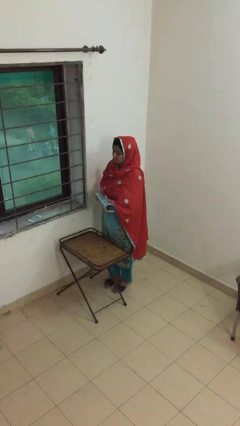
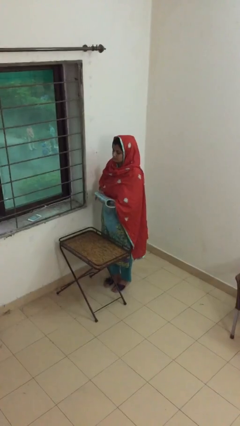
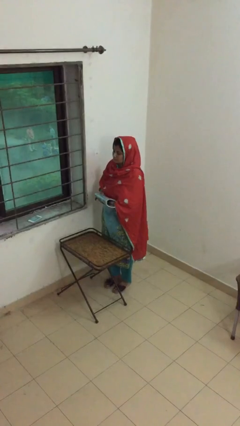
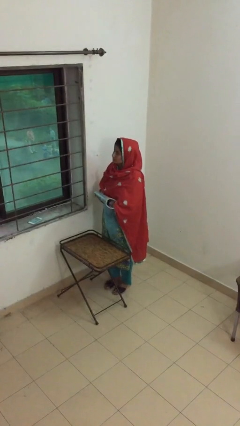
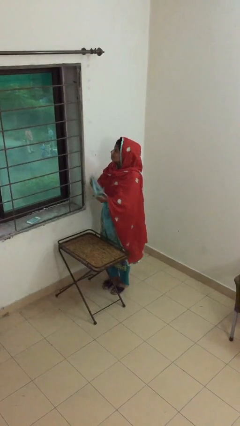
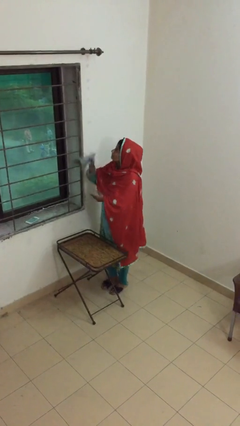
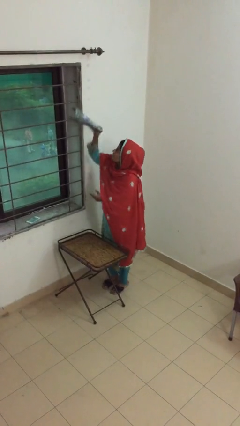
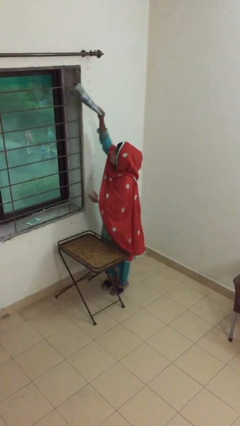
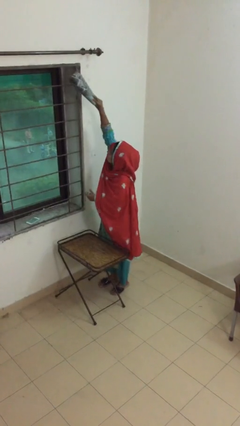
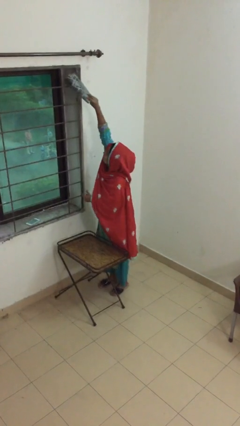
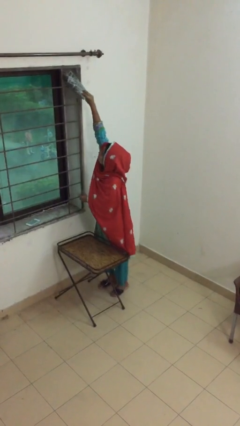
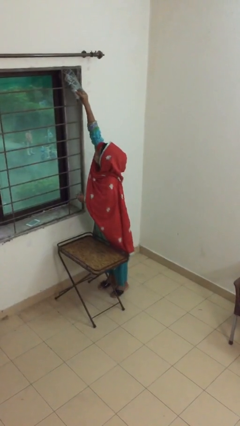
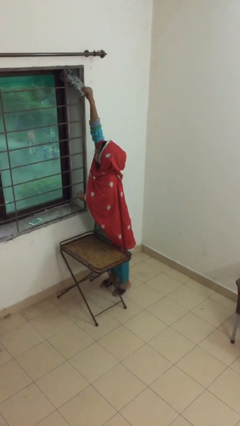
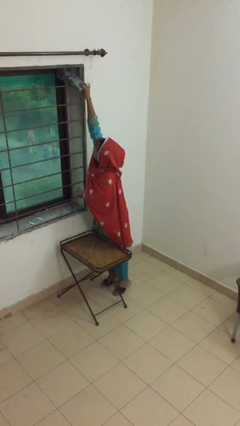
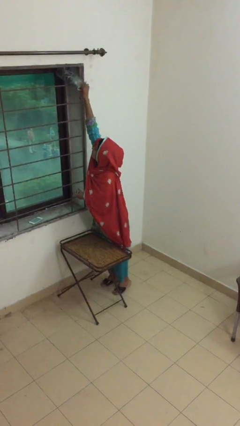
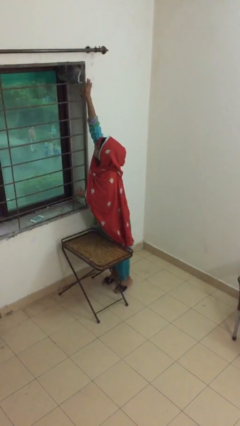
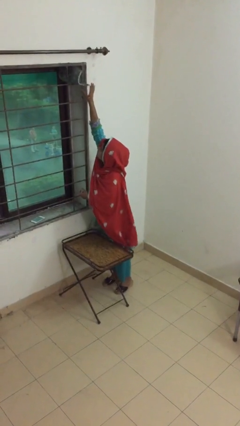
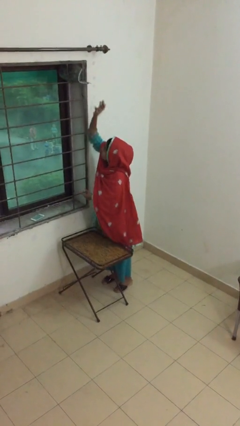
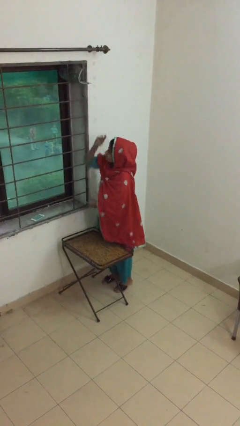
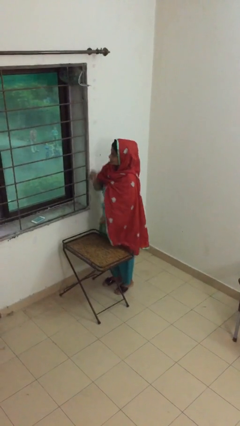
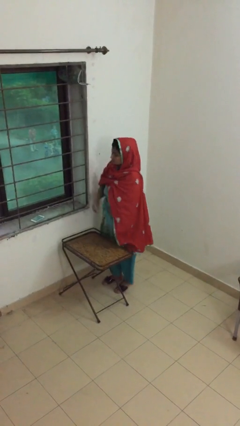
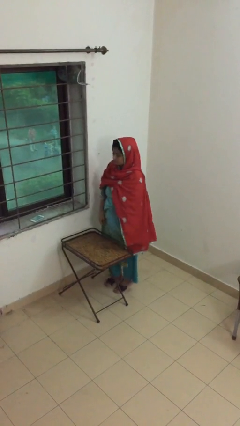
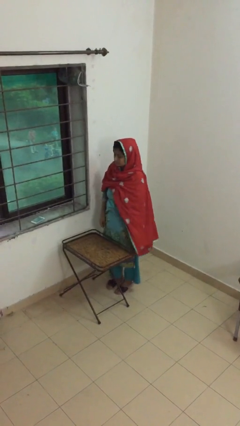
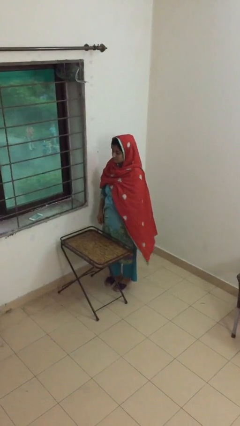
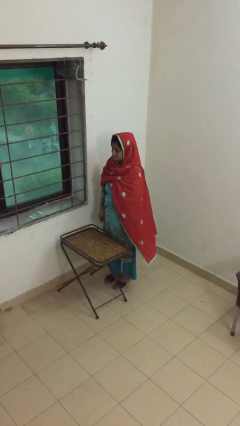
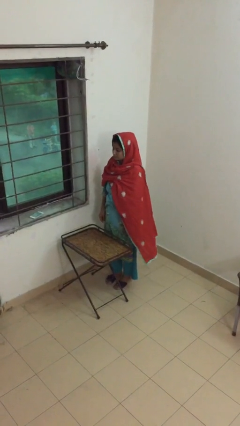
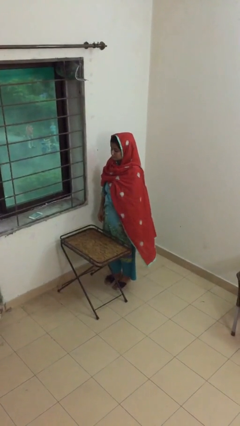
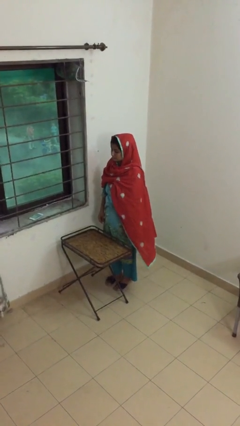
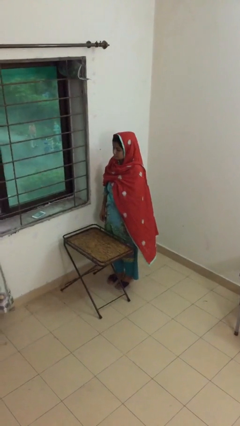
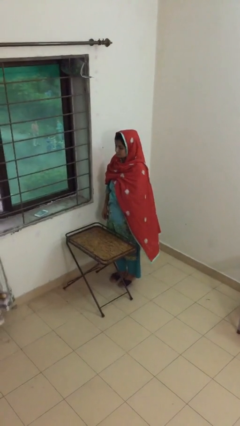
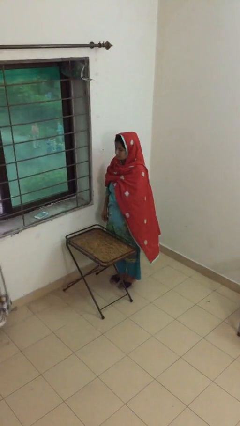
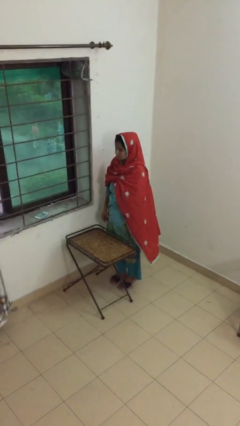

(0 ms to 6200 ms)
person puts down object on shelf

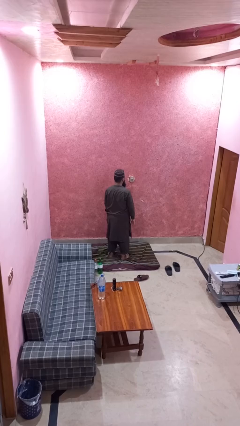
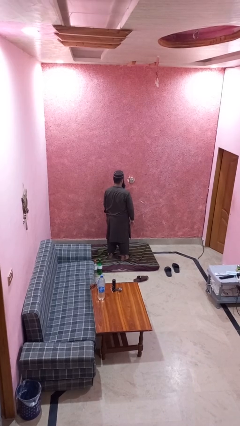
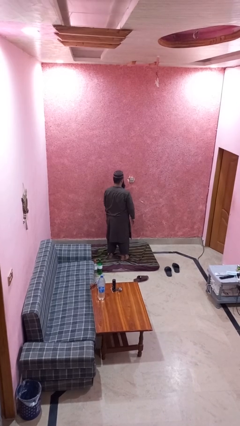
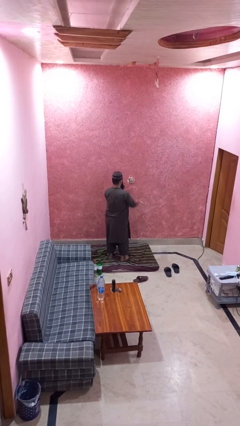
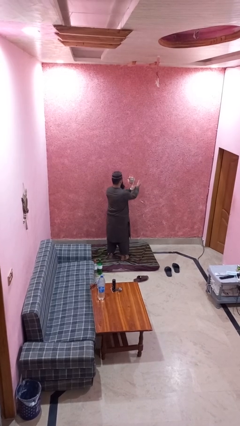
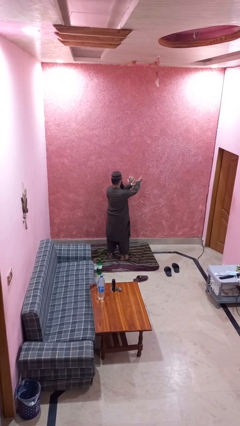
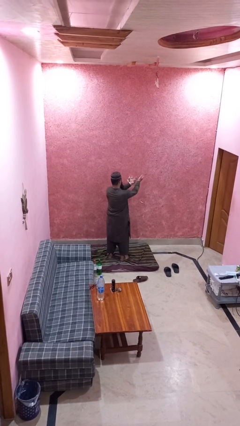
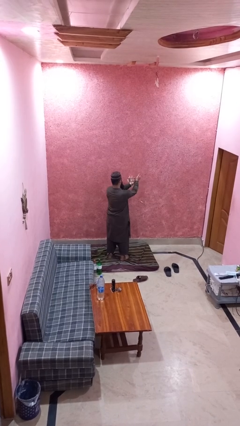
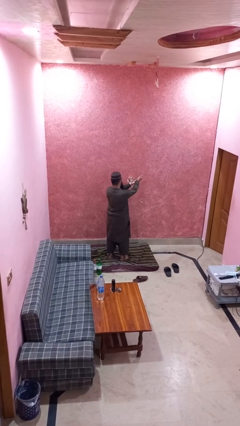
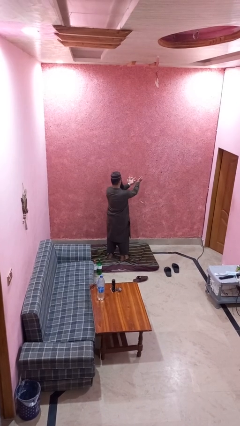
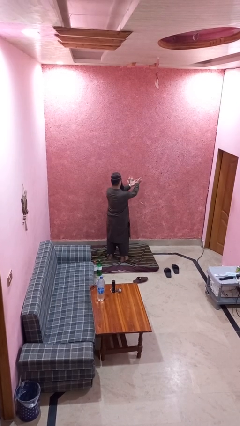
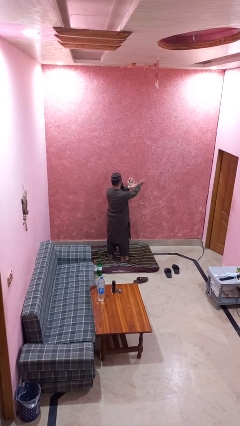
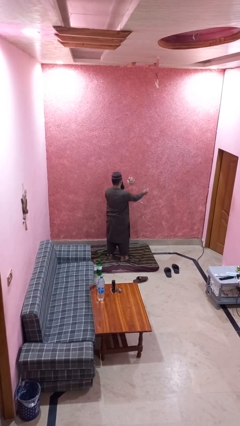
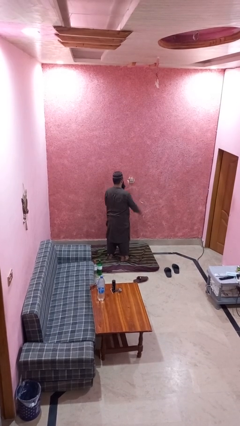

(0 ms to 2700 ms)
person snaps fingers

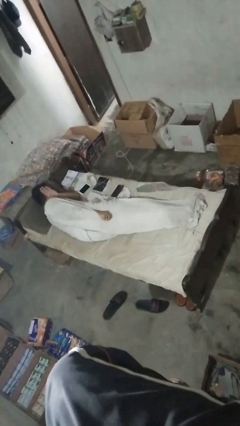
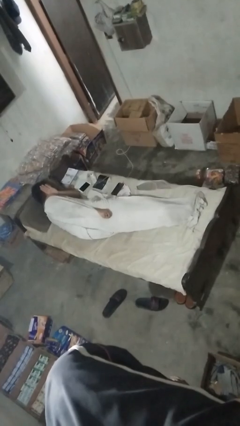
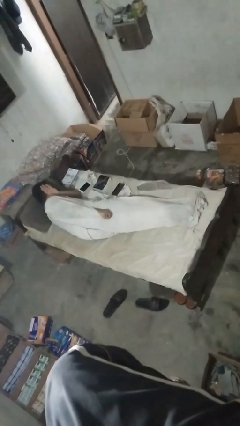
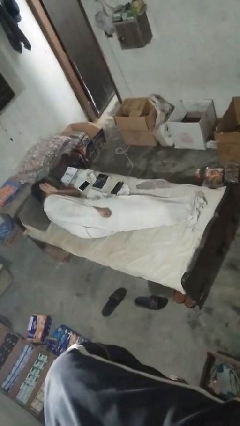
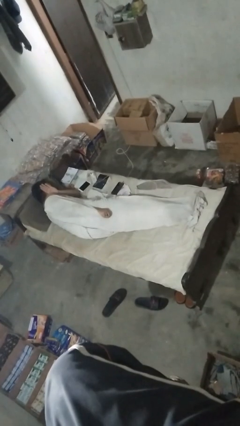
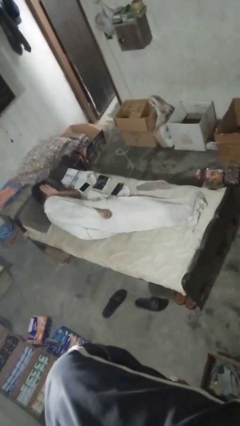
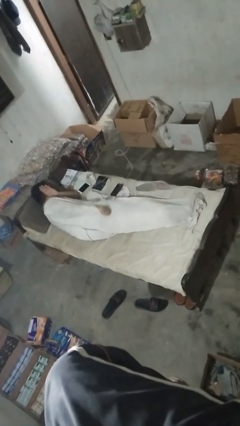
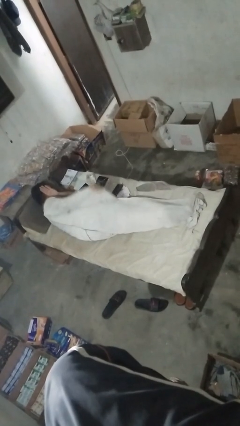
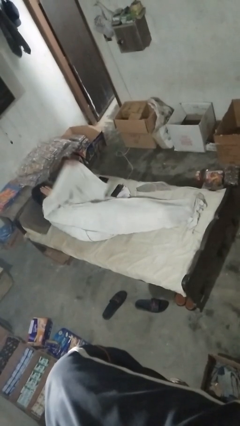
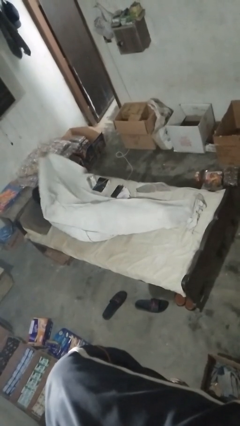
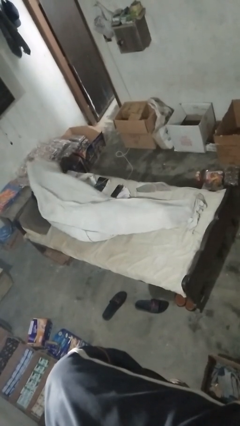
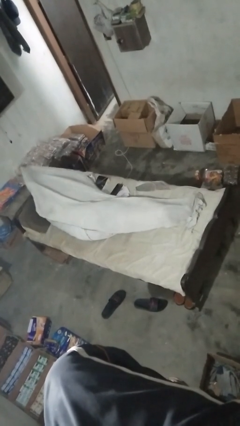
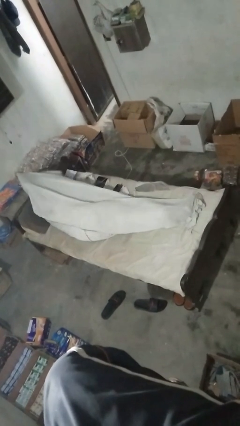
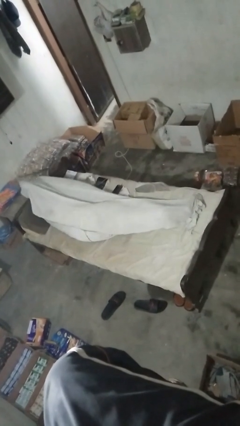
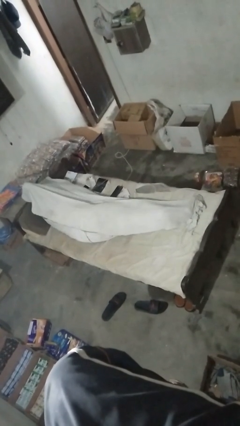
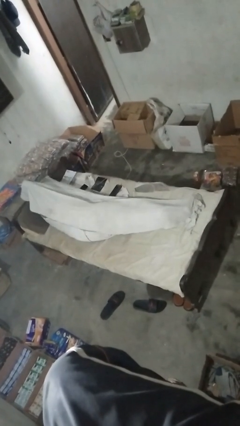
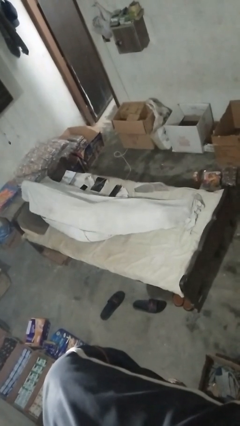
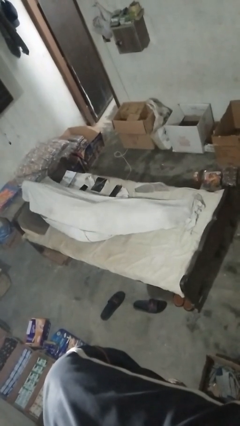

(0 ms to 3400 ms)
person covers with bedsheets

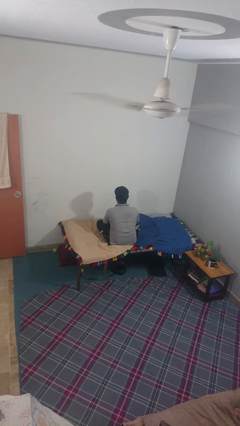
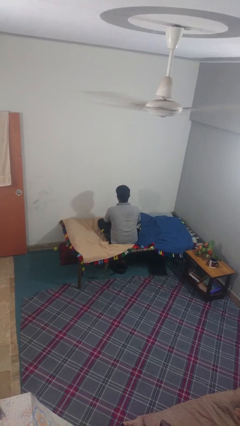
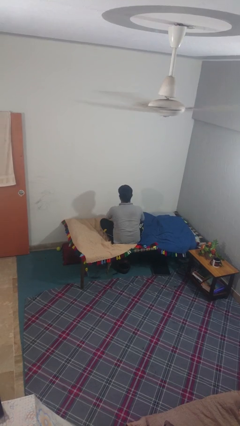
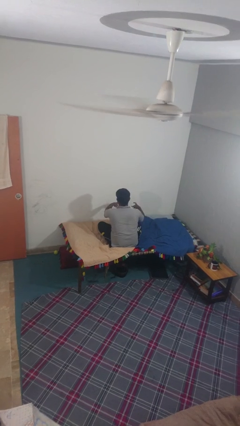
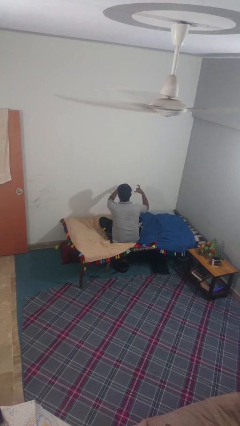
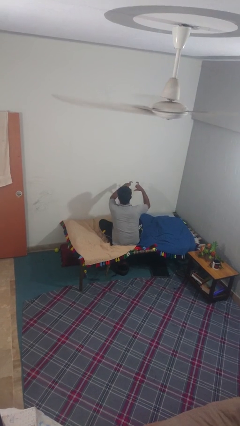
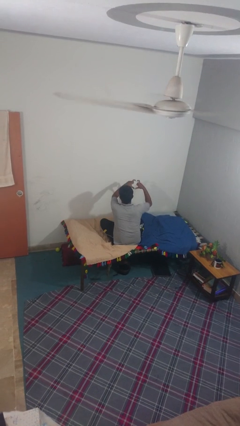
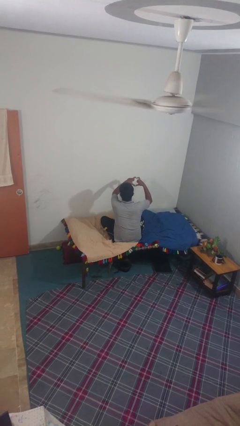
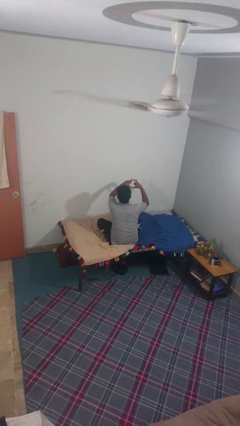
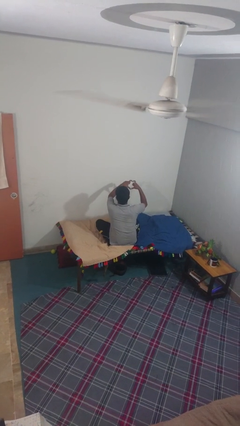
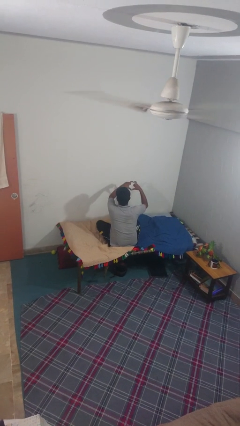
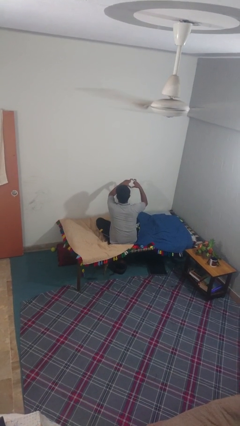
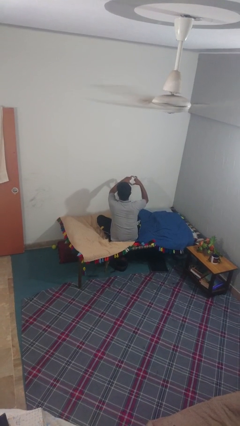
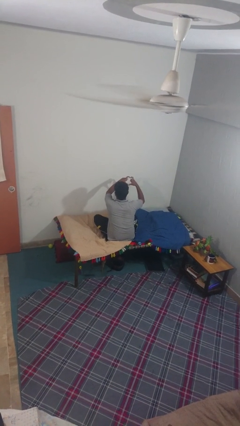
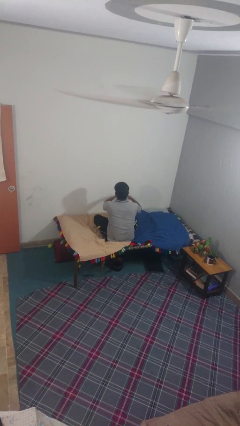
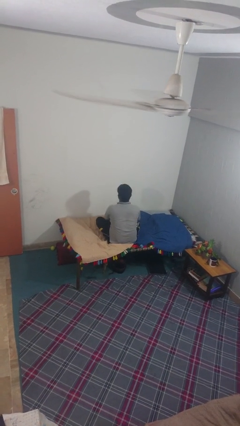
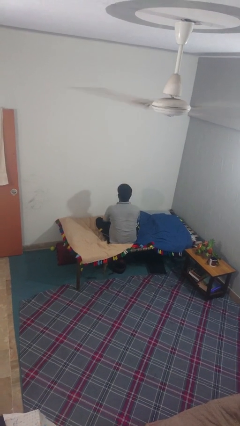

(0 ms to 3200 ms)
person gestures heart

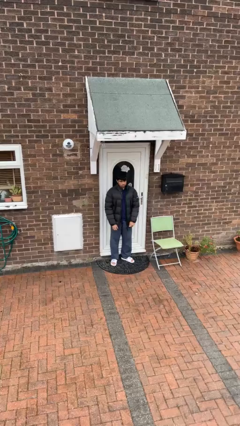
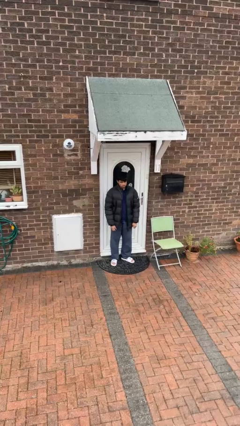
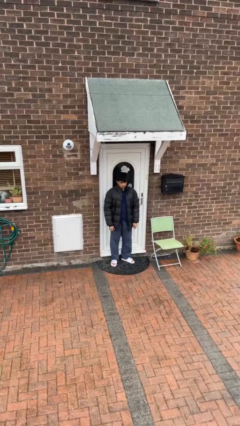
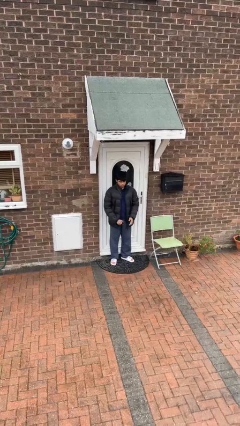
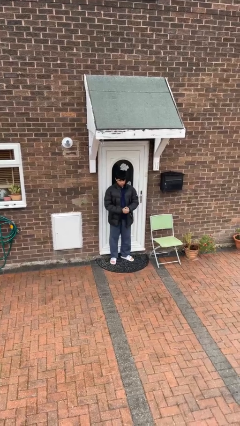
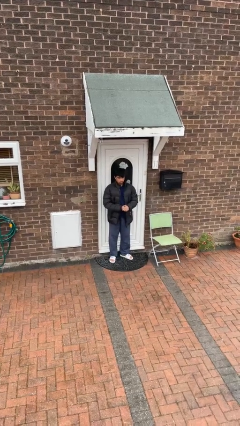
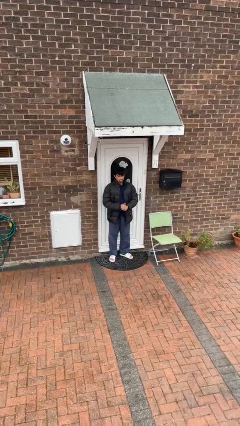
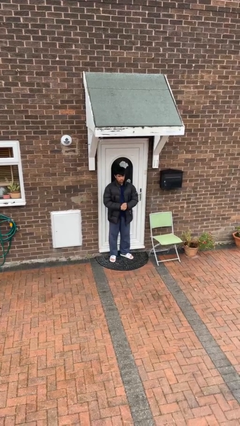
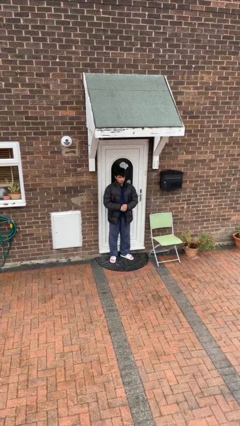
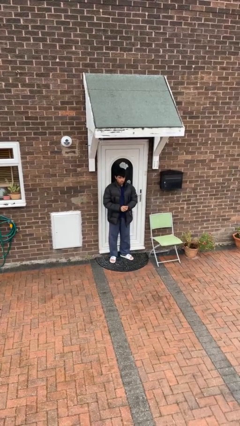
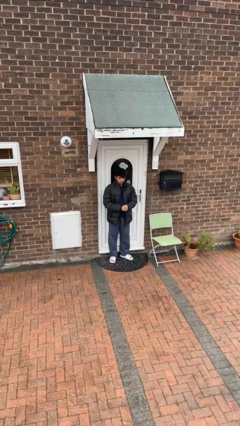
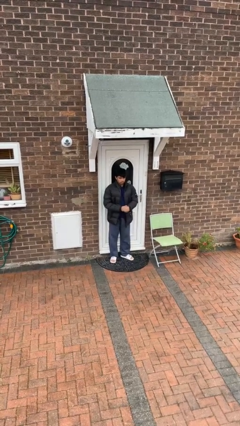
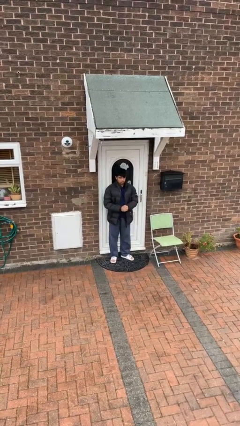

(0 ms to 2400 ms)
person cracks knuckles
